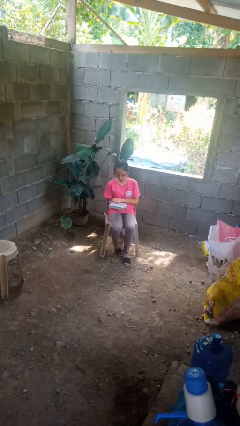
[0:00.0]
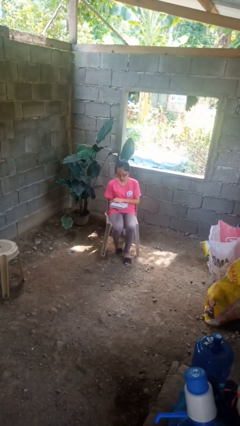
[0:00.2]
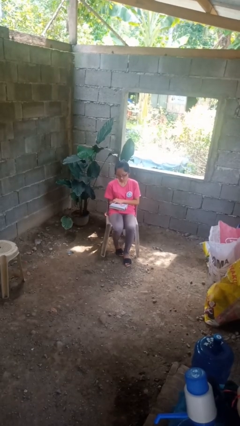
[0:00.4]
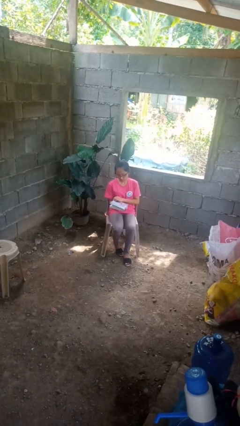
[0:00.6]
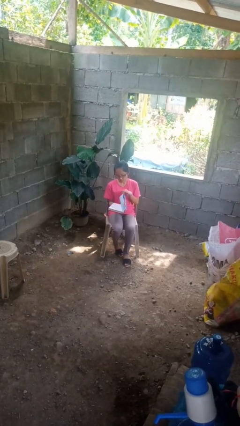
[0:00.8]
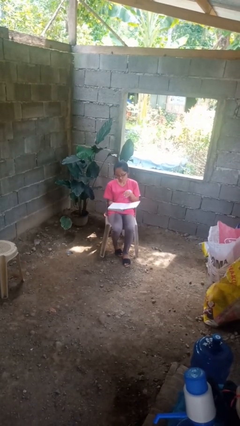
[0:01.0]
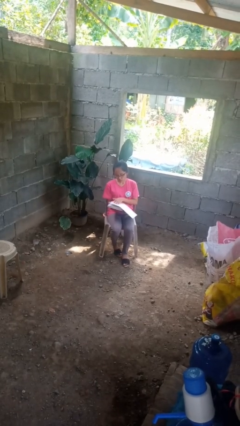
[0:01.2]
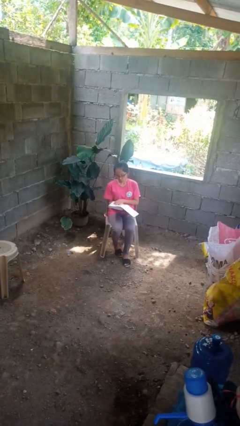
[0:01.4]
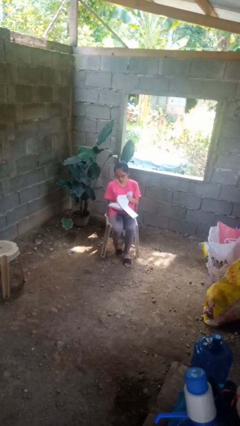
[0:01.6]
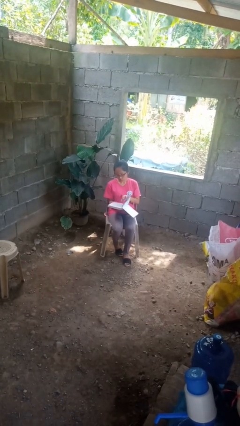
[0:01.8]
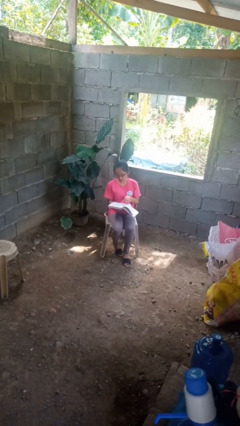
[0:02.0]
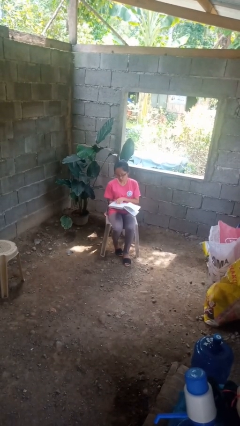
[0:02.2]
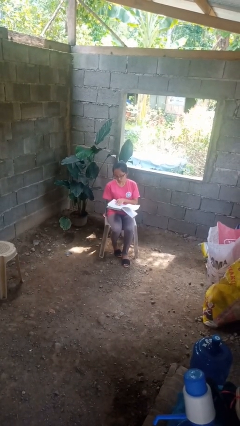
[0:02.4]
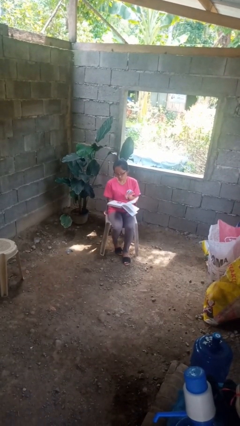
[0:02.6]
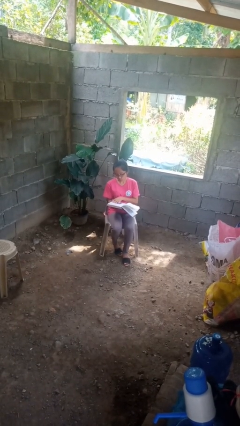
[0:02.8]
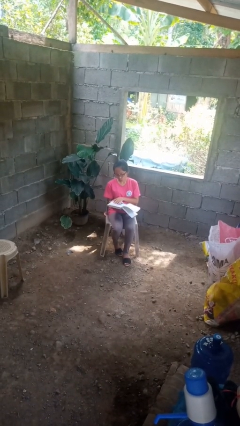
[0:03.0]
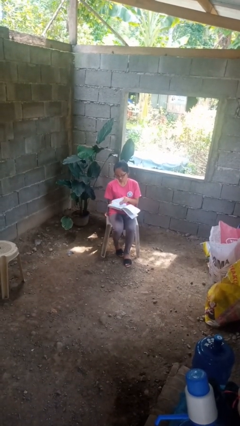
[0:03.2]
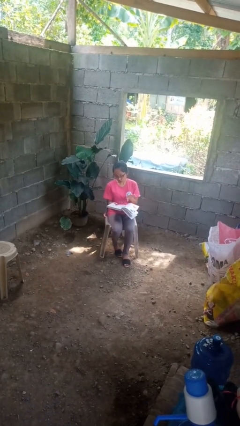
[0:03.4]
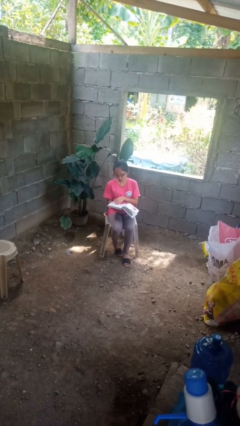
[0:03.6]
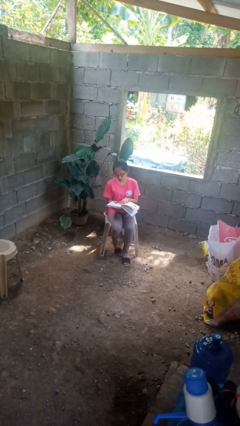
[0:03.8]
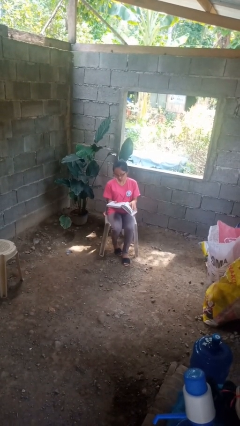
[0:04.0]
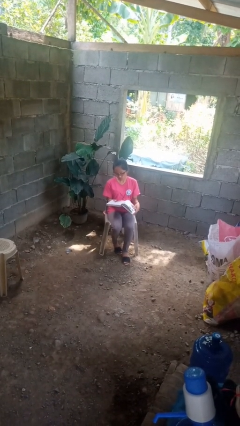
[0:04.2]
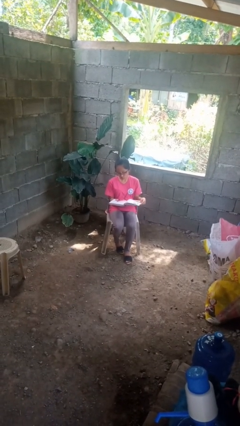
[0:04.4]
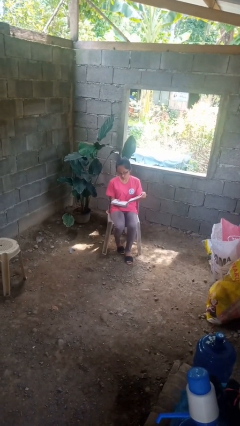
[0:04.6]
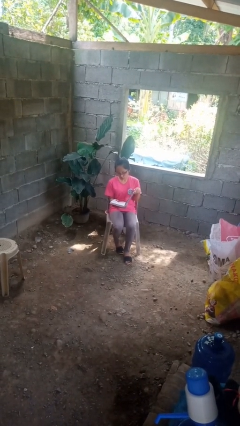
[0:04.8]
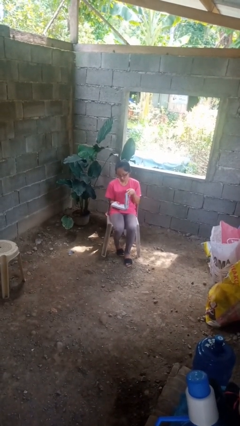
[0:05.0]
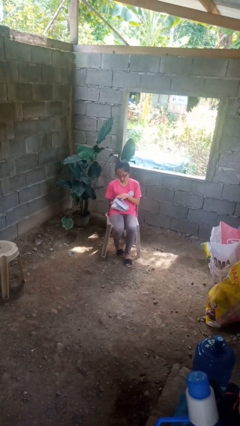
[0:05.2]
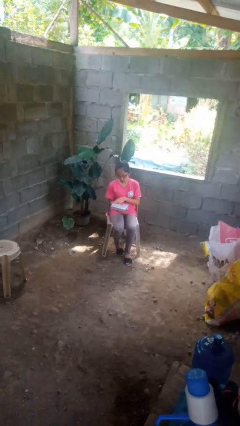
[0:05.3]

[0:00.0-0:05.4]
person reads book

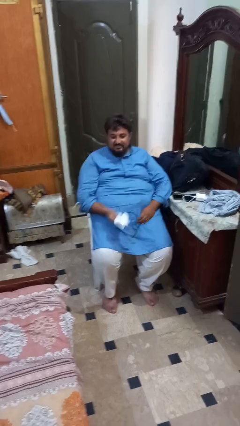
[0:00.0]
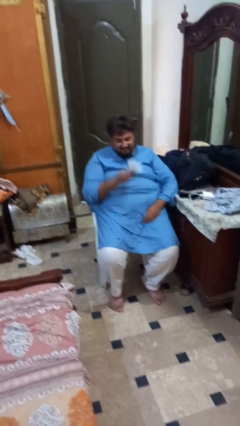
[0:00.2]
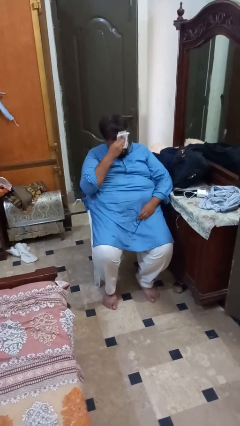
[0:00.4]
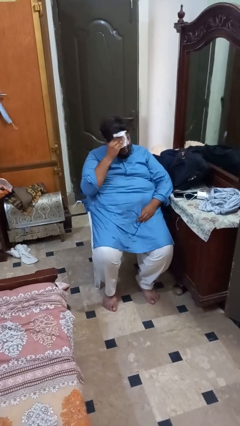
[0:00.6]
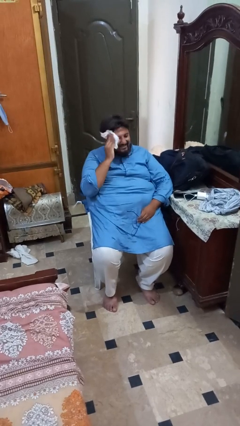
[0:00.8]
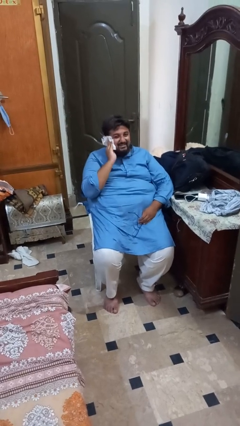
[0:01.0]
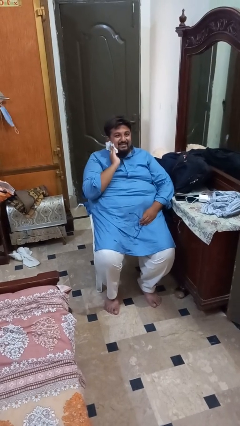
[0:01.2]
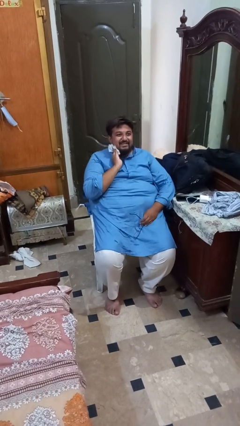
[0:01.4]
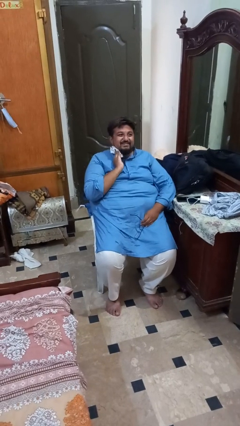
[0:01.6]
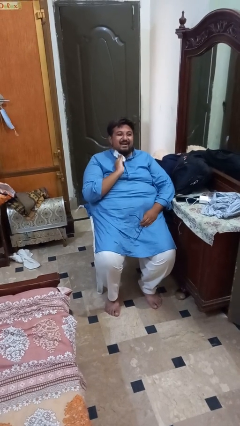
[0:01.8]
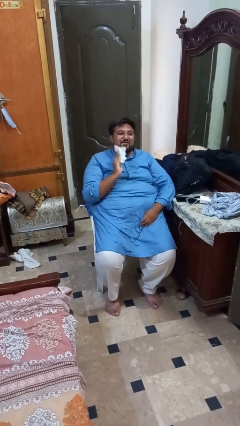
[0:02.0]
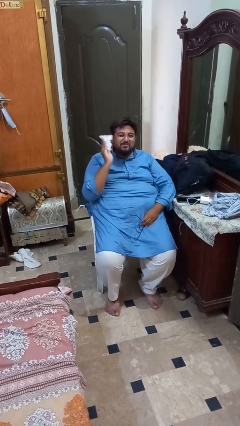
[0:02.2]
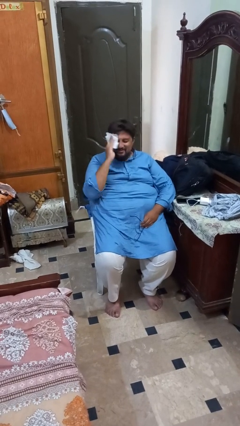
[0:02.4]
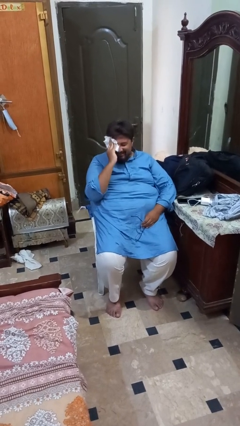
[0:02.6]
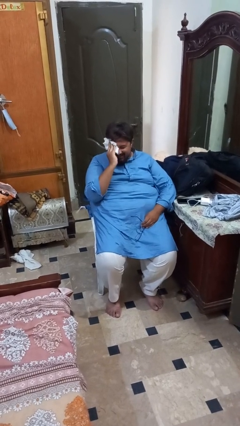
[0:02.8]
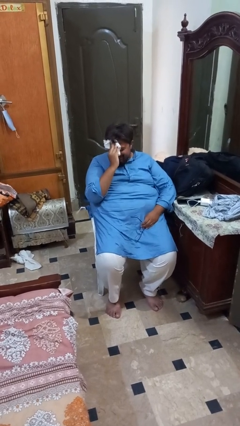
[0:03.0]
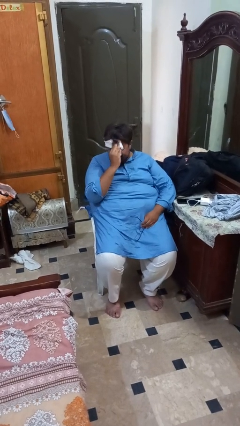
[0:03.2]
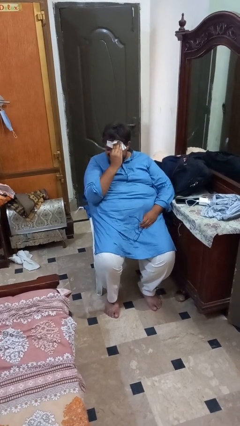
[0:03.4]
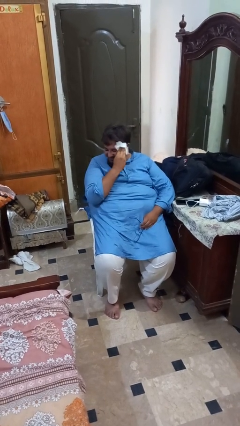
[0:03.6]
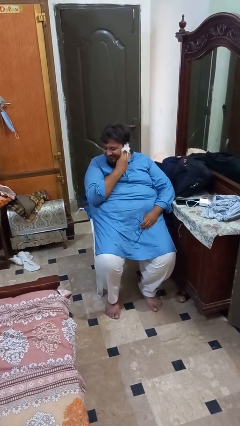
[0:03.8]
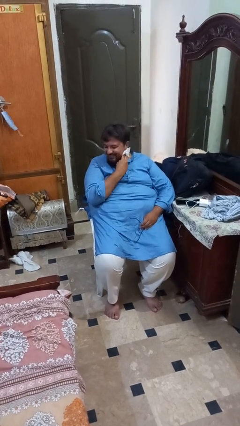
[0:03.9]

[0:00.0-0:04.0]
person wipes mouth with napkin

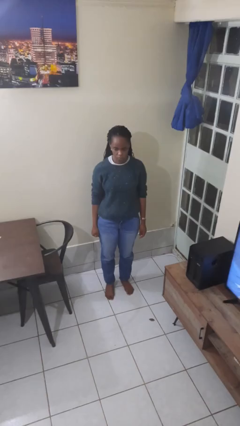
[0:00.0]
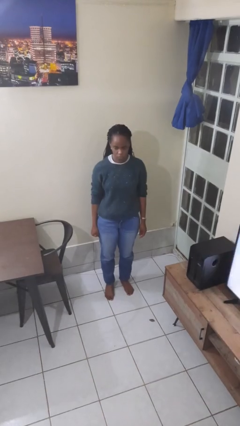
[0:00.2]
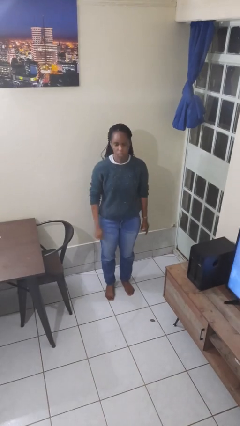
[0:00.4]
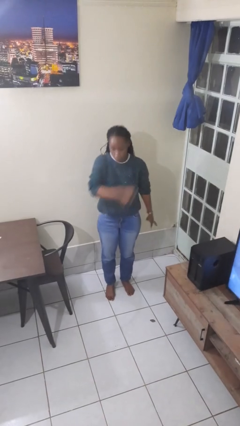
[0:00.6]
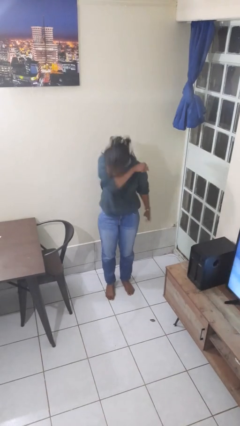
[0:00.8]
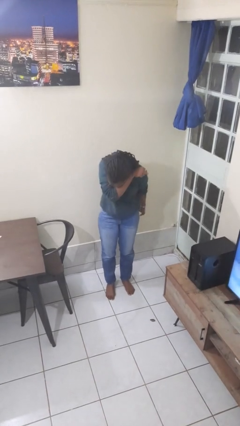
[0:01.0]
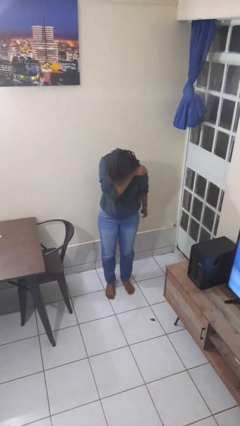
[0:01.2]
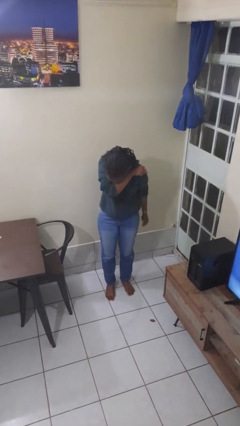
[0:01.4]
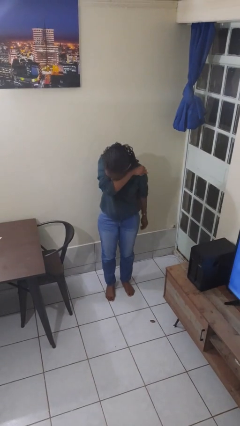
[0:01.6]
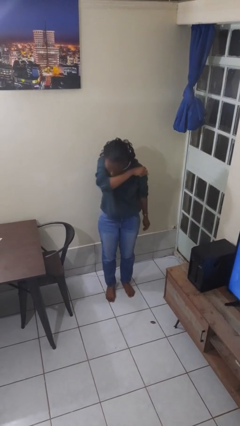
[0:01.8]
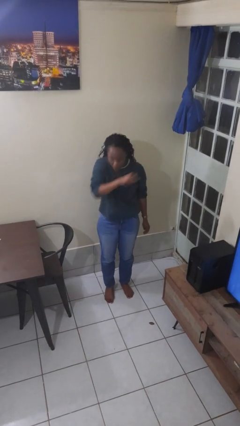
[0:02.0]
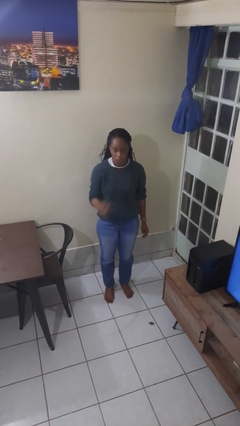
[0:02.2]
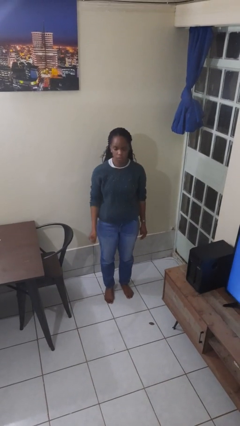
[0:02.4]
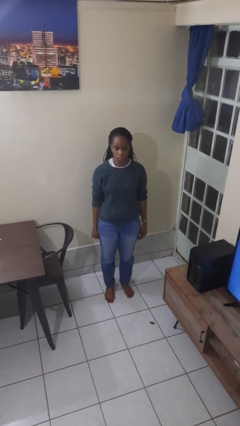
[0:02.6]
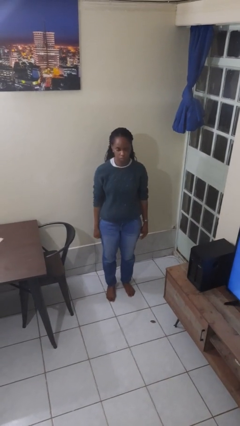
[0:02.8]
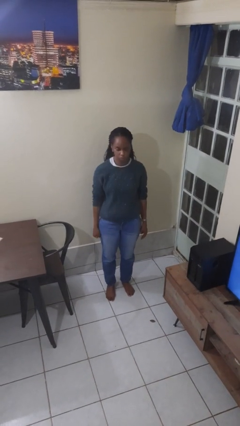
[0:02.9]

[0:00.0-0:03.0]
person sneezes into arm

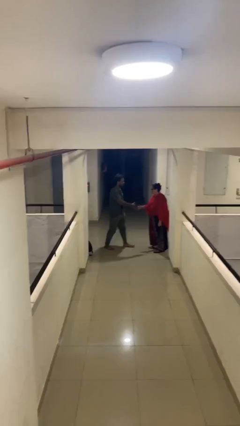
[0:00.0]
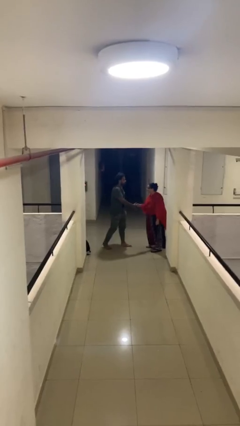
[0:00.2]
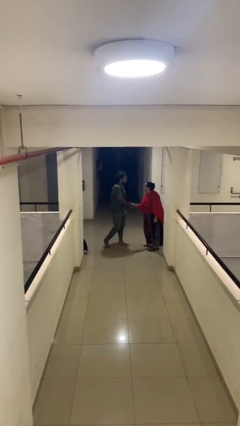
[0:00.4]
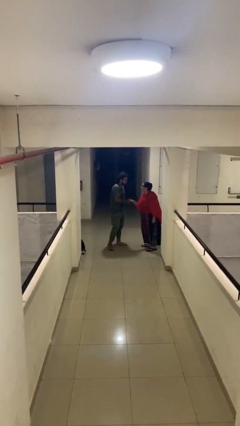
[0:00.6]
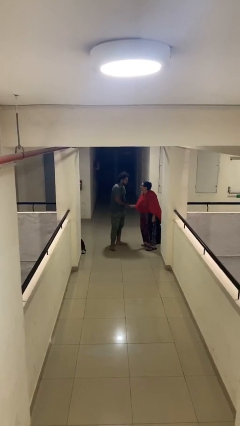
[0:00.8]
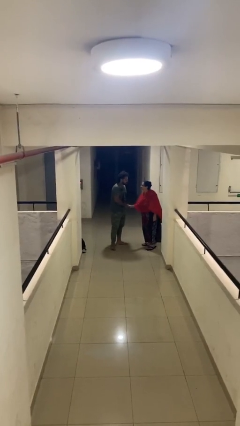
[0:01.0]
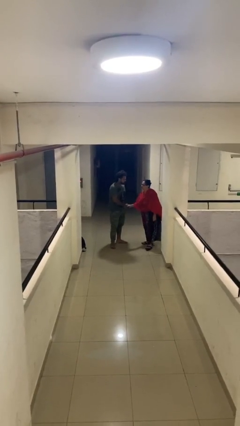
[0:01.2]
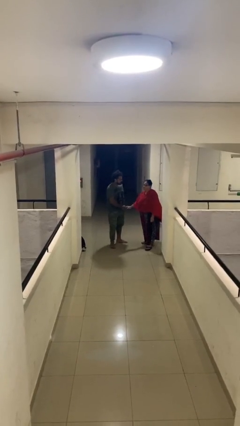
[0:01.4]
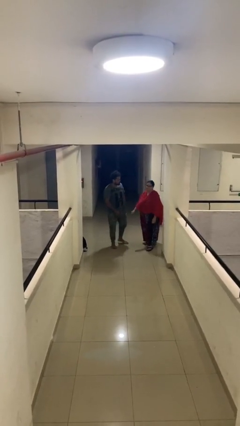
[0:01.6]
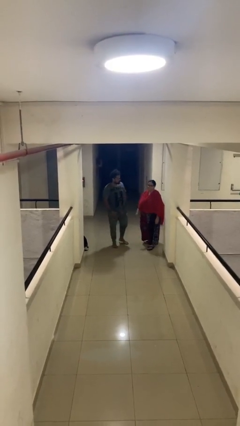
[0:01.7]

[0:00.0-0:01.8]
person shakes hand

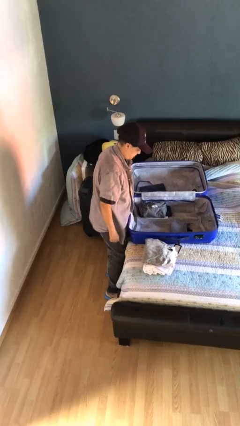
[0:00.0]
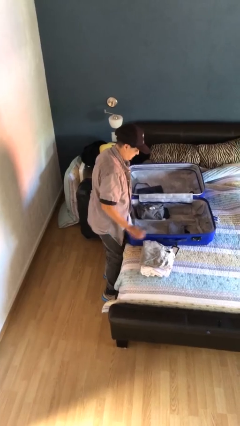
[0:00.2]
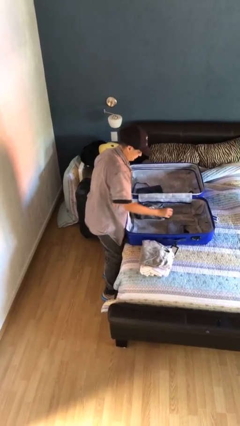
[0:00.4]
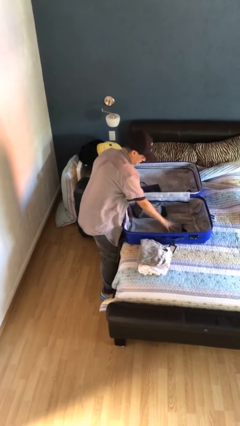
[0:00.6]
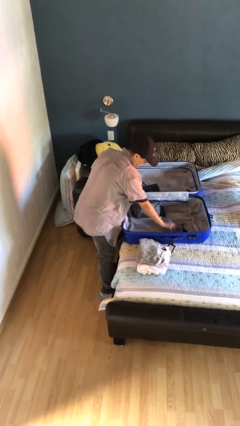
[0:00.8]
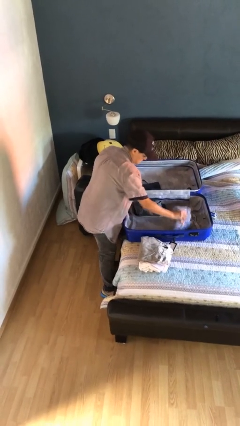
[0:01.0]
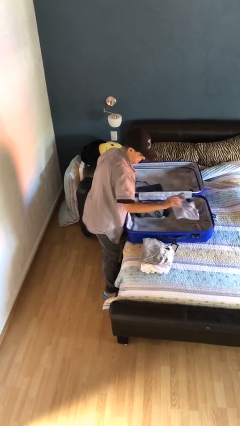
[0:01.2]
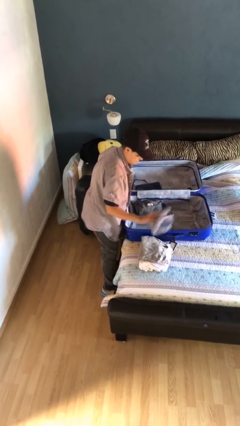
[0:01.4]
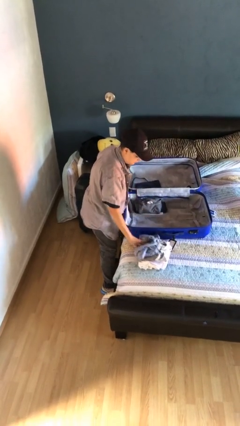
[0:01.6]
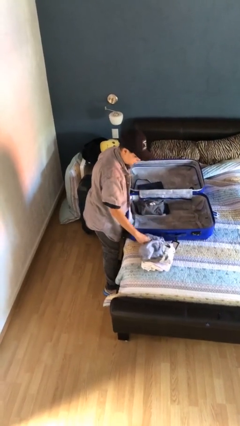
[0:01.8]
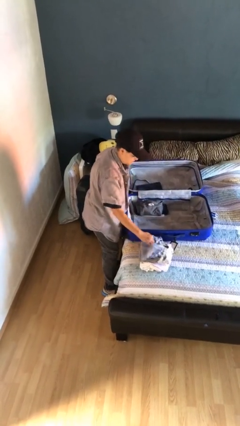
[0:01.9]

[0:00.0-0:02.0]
person unloads clothes from suitcase

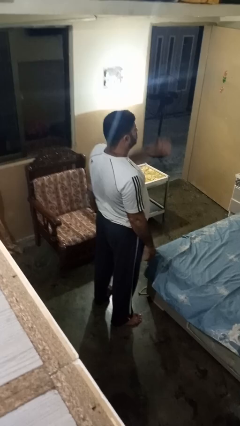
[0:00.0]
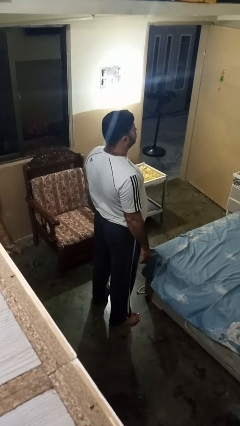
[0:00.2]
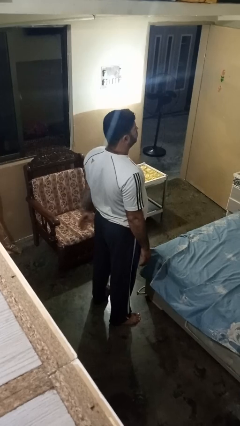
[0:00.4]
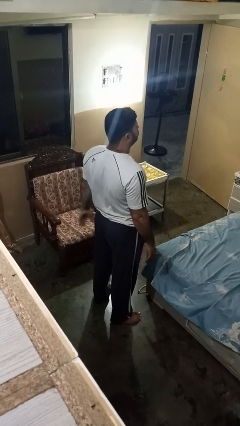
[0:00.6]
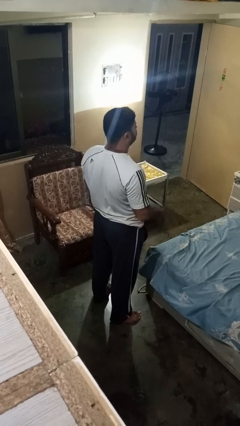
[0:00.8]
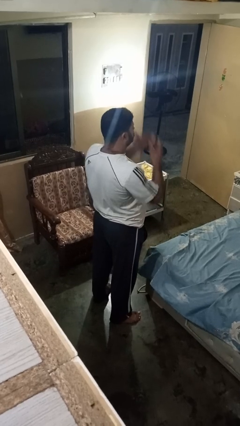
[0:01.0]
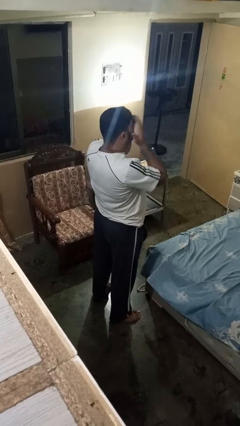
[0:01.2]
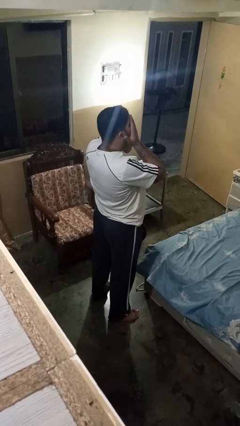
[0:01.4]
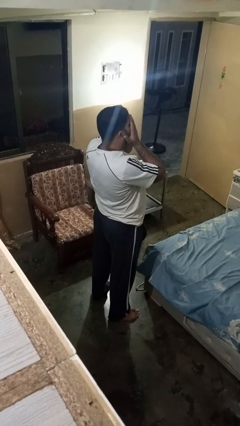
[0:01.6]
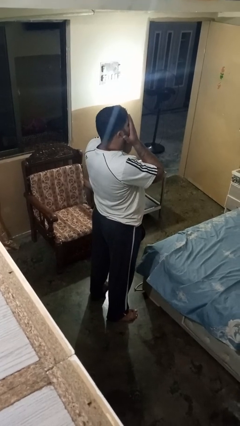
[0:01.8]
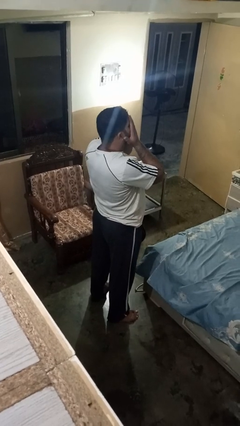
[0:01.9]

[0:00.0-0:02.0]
person covers face with hands
